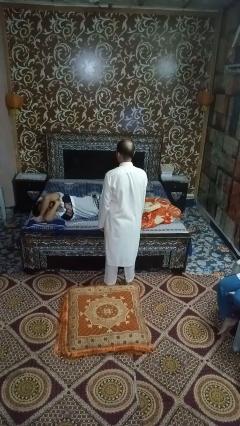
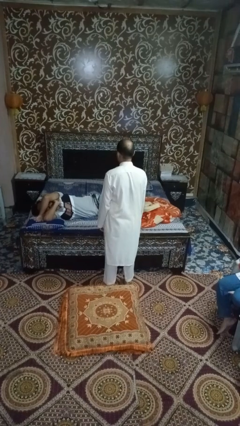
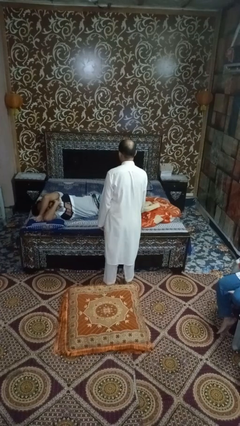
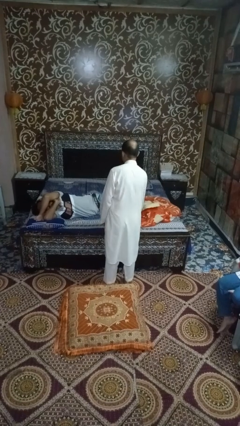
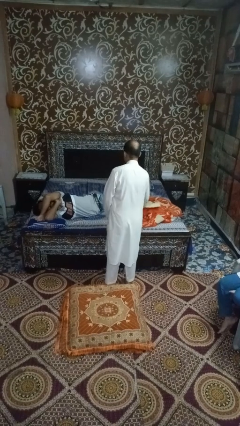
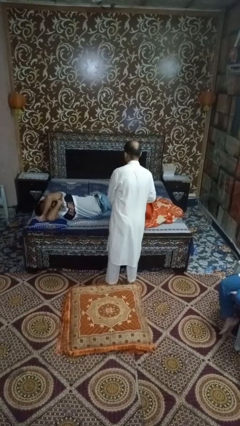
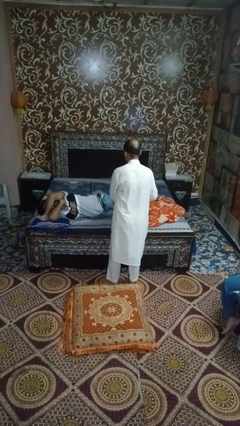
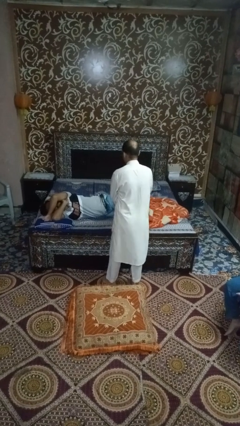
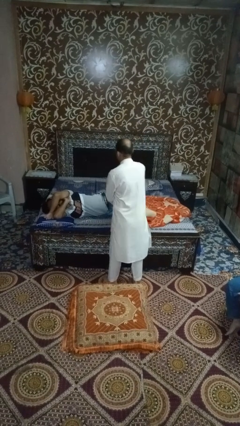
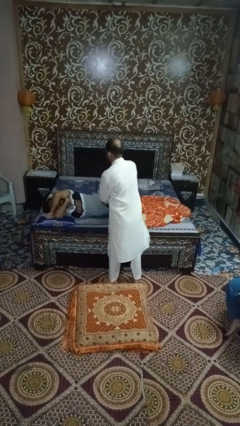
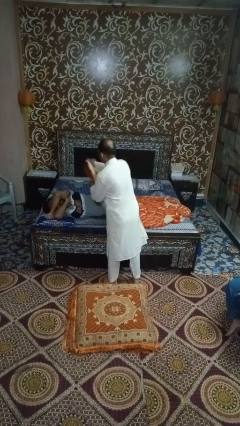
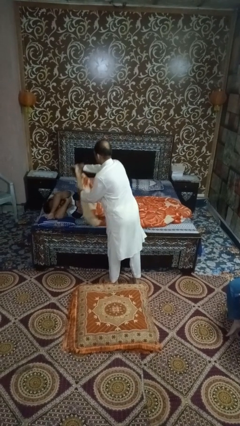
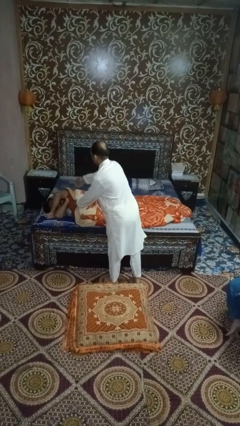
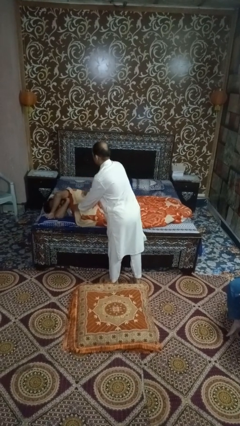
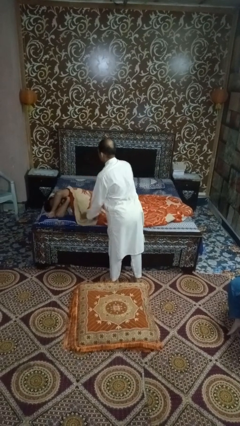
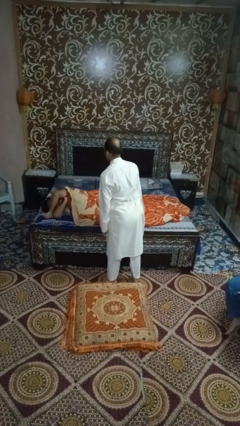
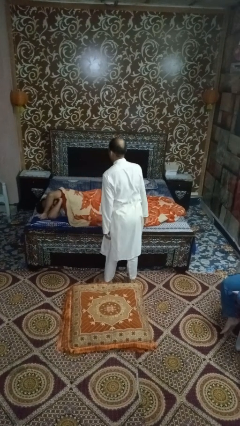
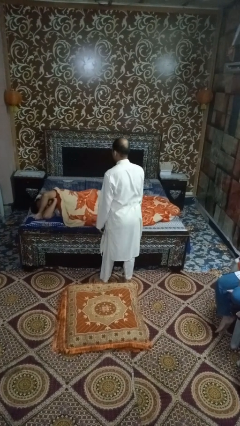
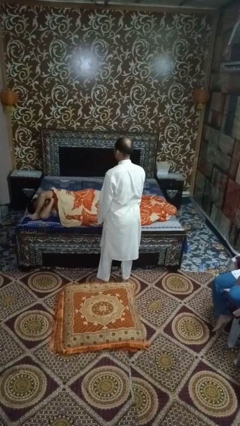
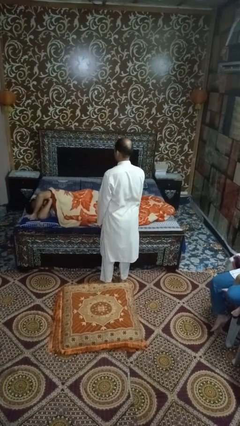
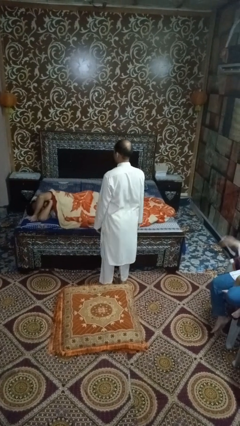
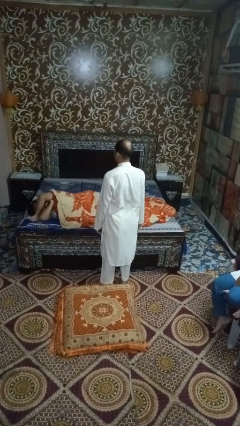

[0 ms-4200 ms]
person covers friend with blanket

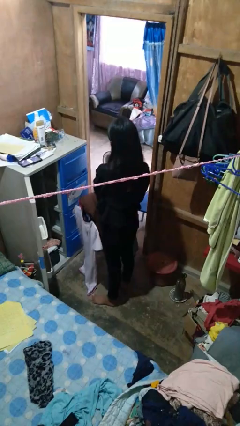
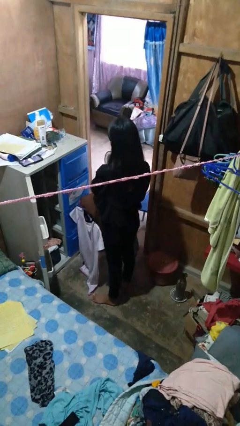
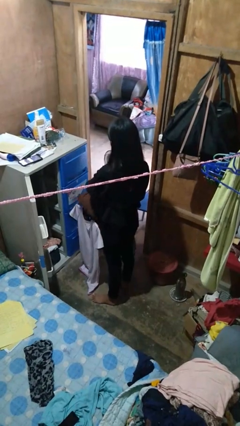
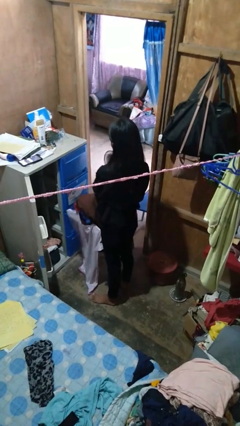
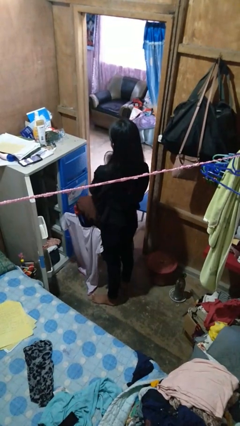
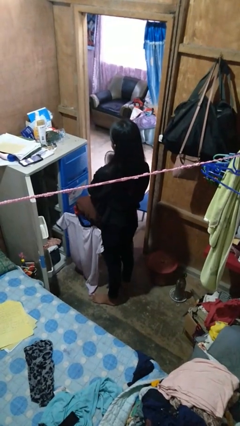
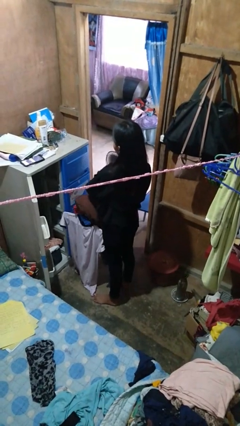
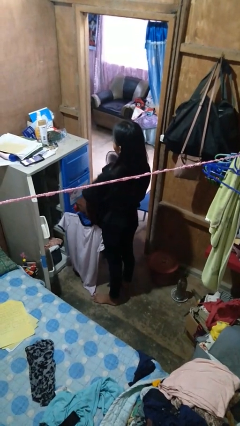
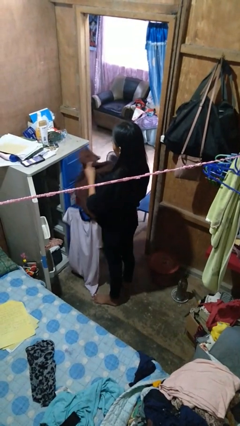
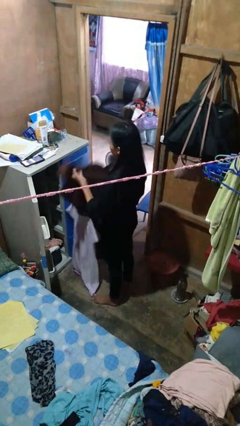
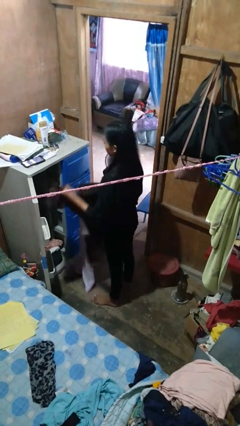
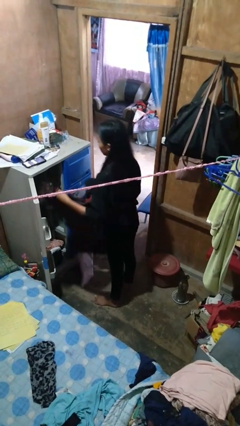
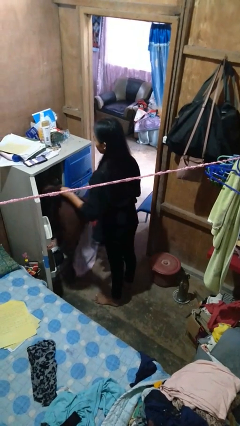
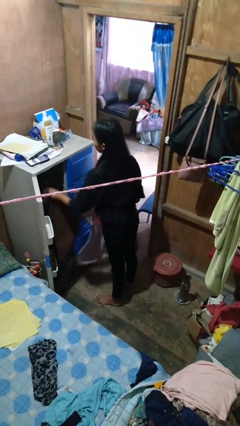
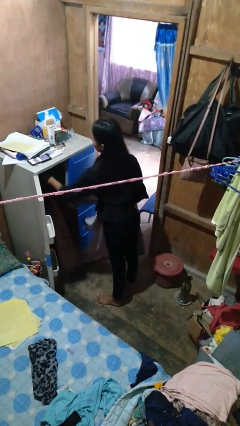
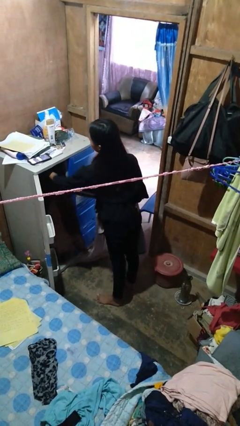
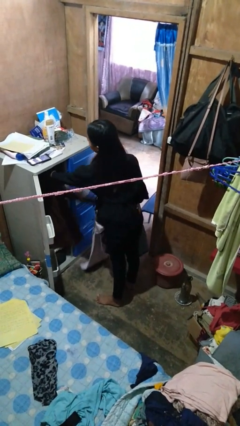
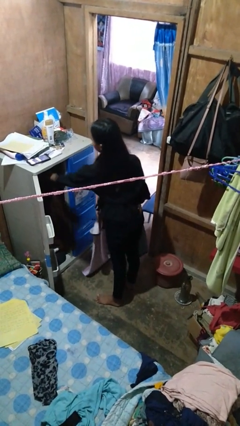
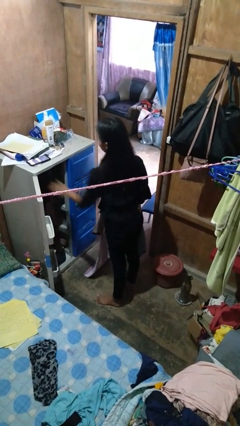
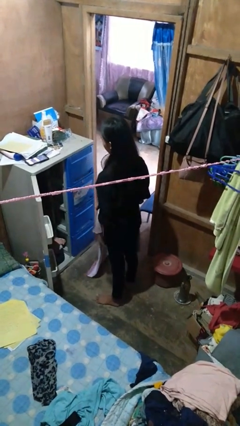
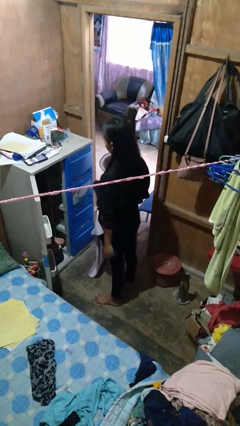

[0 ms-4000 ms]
person puts clothes into closet

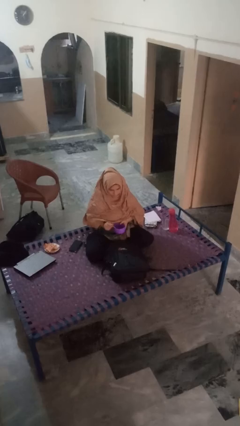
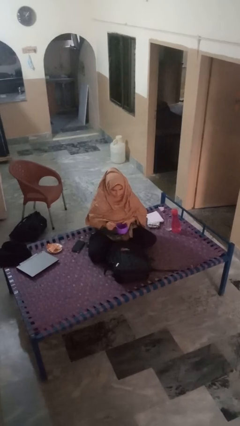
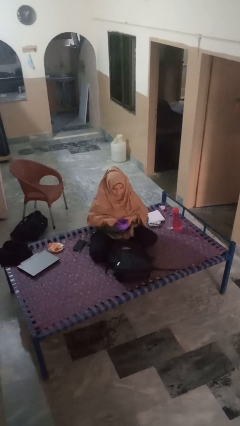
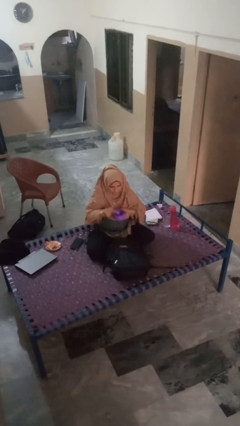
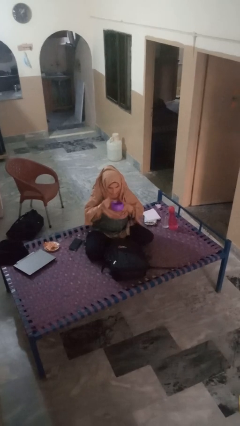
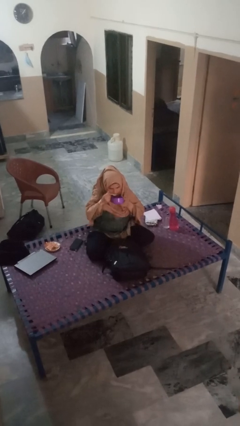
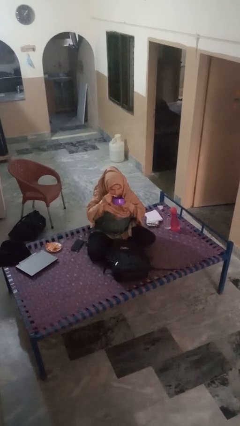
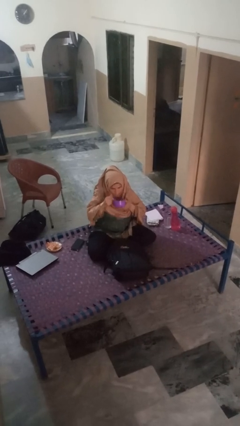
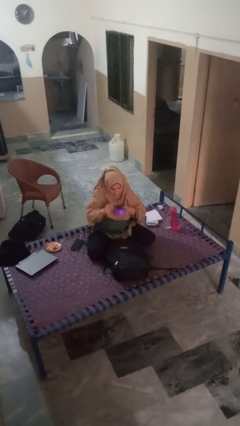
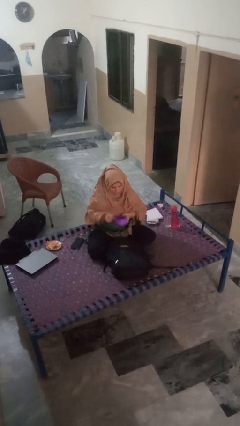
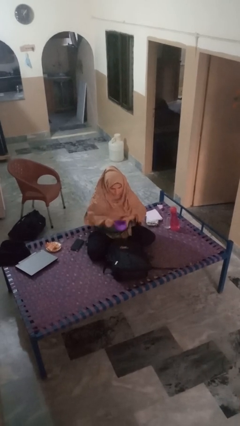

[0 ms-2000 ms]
person eats snack from bag

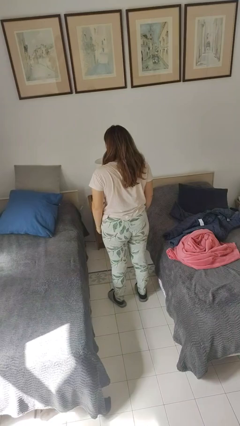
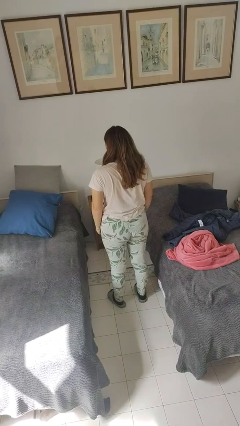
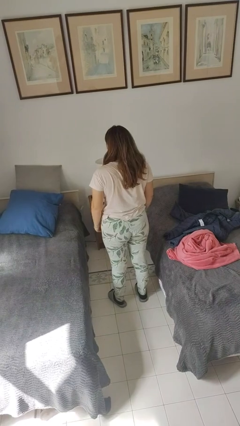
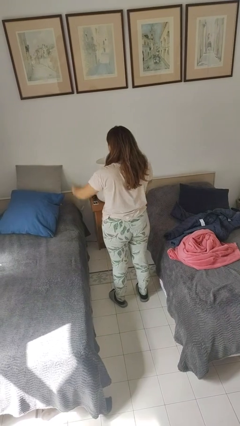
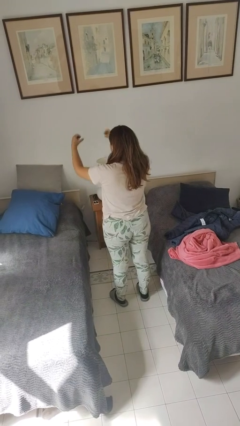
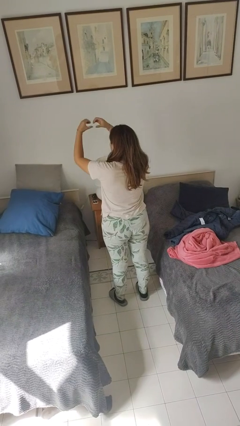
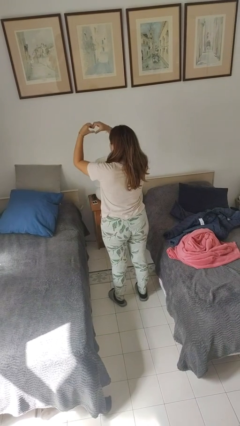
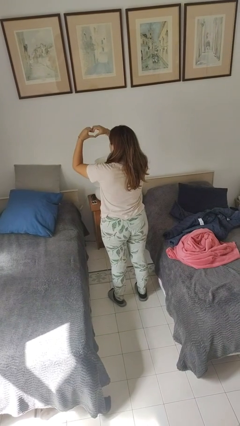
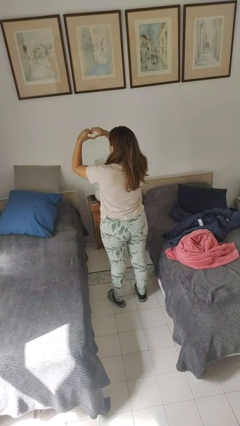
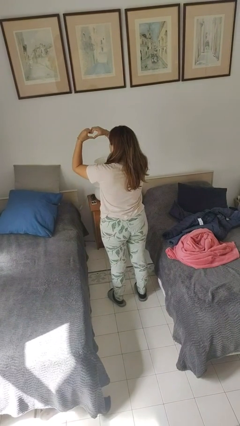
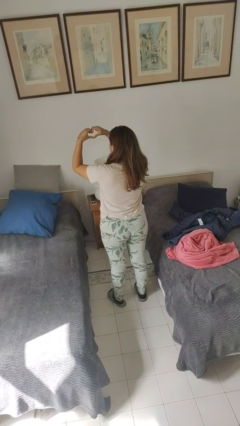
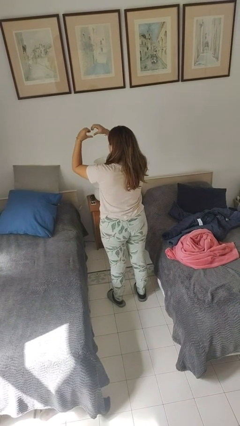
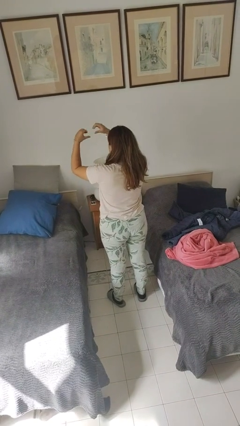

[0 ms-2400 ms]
person gestures heart

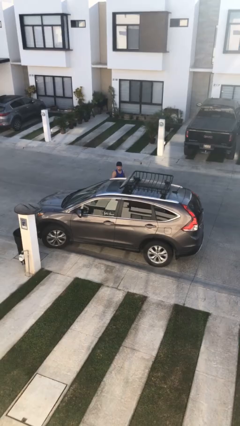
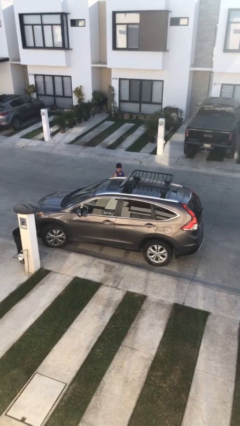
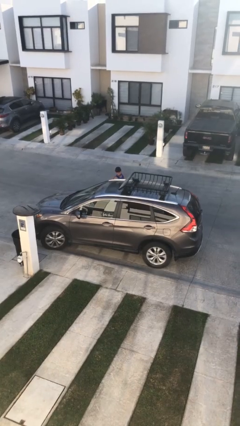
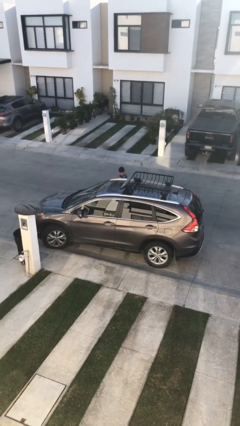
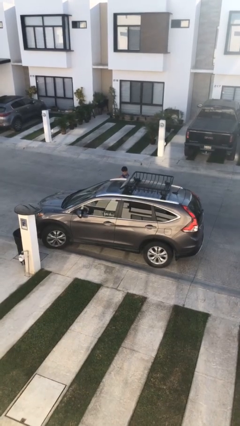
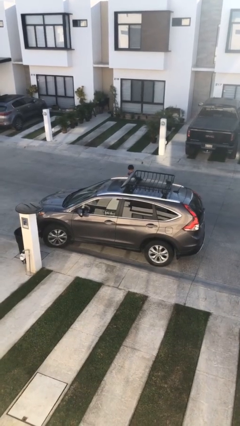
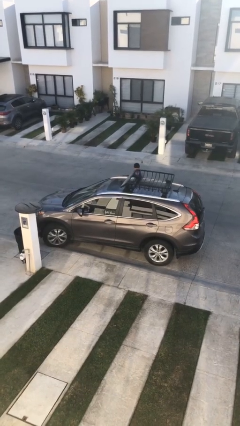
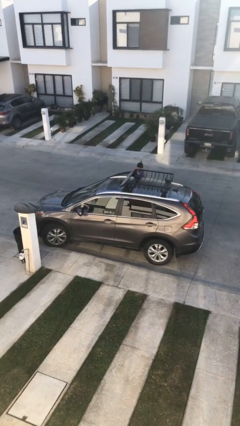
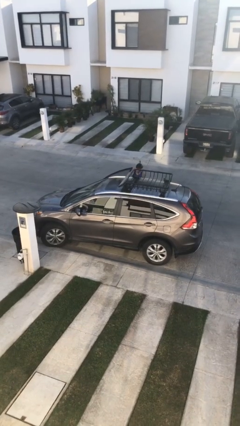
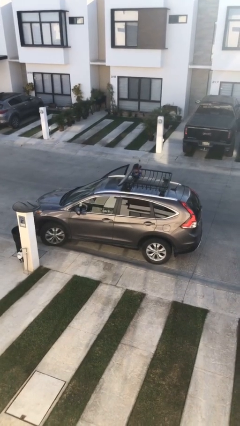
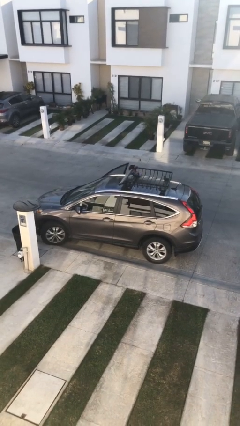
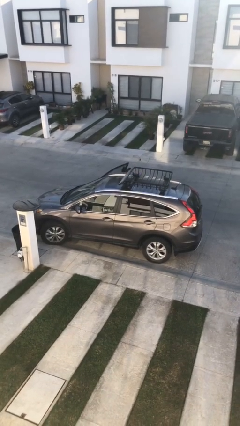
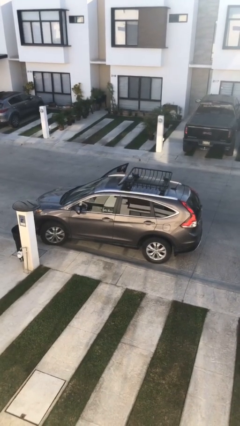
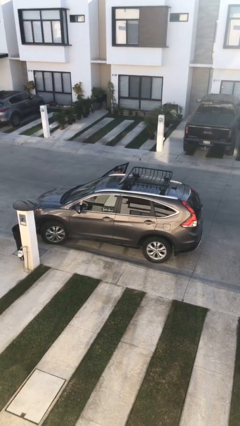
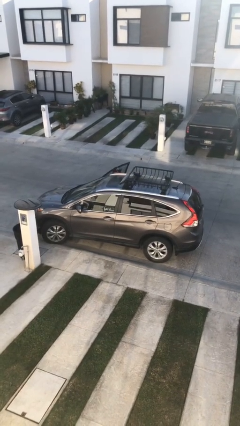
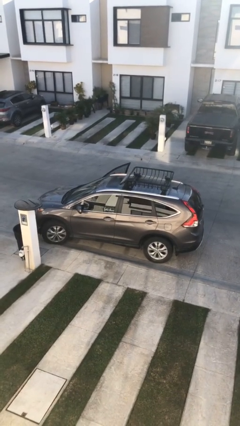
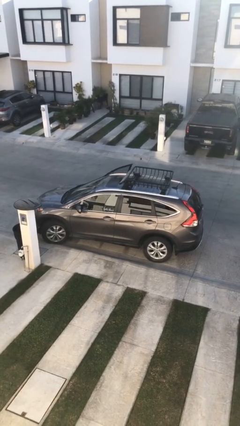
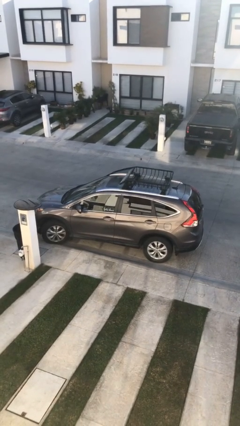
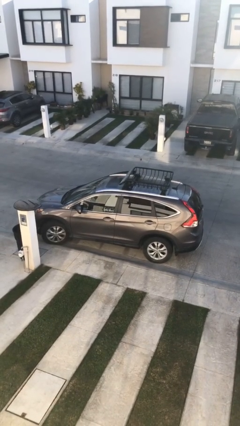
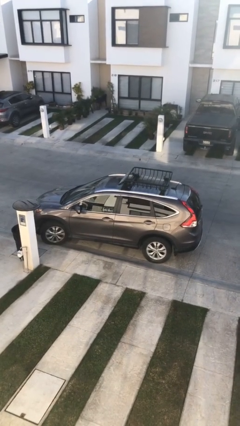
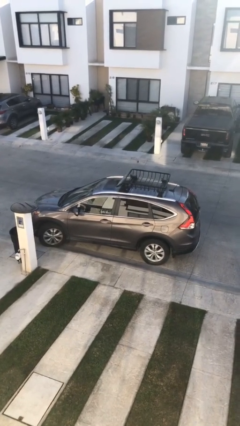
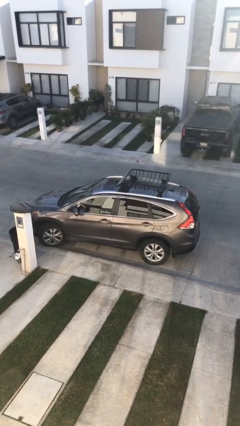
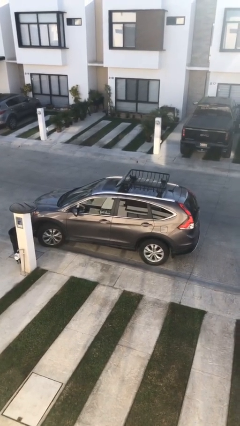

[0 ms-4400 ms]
car picks up person

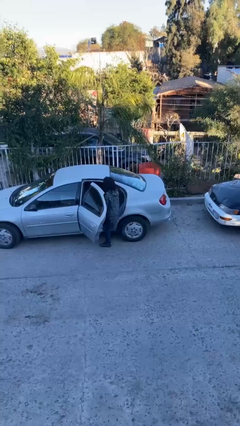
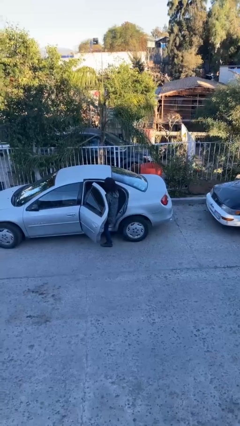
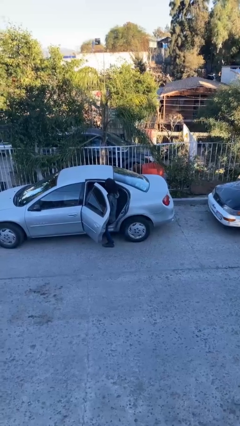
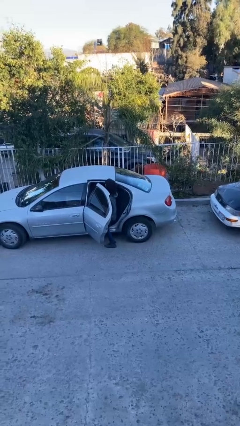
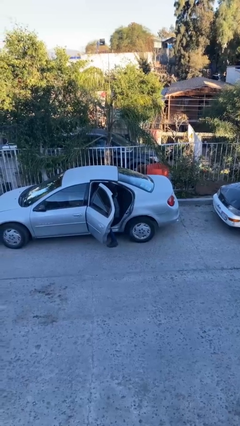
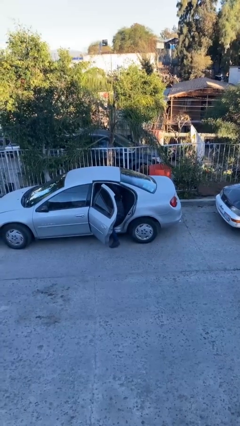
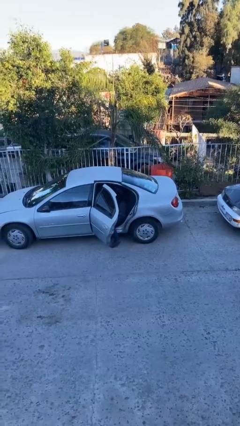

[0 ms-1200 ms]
person enters car
